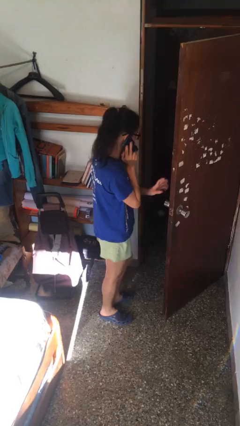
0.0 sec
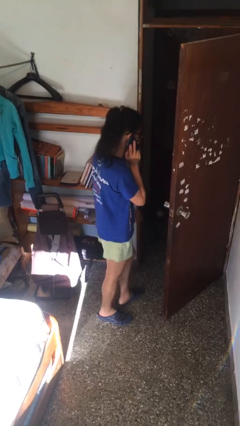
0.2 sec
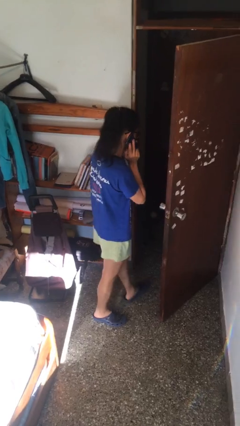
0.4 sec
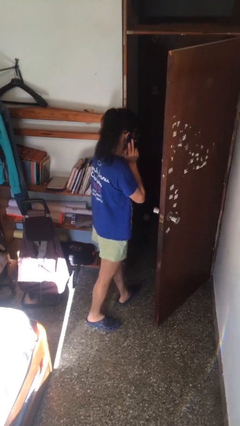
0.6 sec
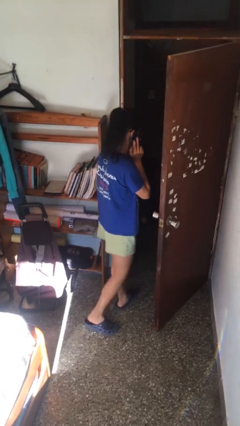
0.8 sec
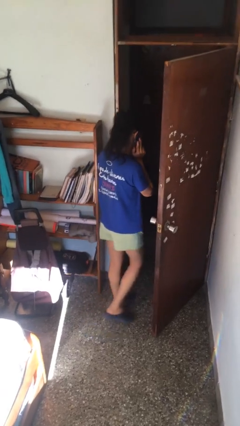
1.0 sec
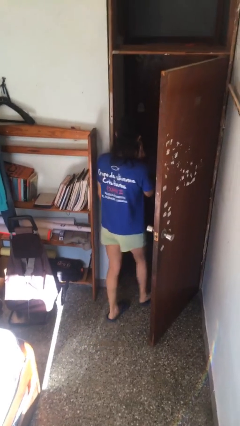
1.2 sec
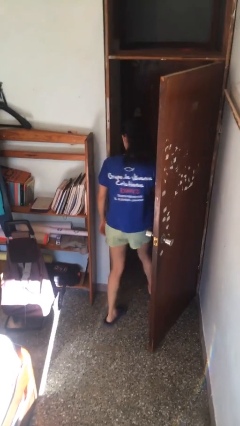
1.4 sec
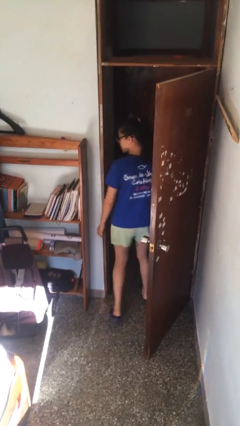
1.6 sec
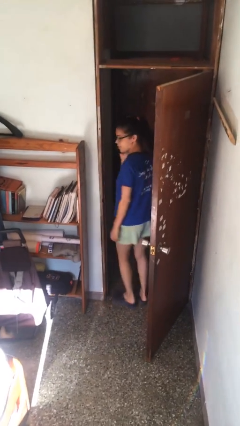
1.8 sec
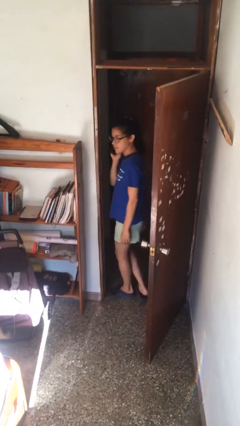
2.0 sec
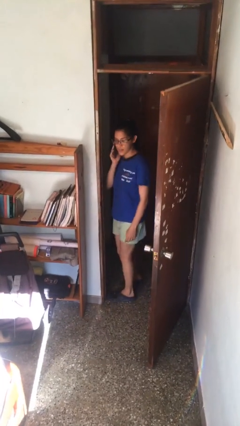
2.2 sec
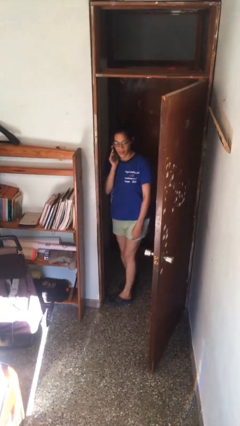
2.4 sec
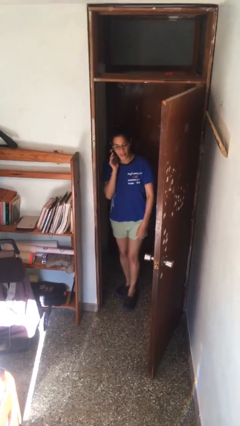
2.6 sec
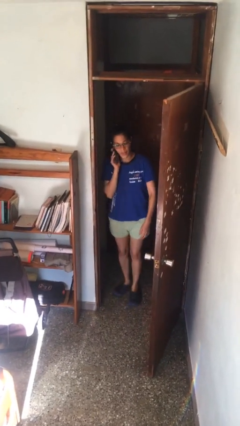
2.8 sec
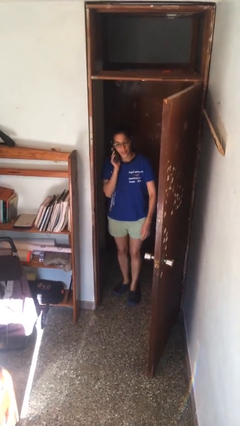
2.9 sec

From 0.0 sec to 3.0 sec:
person exits scene through structure

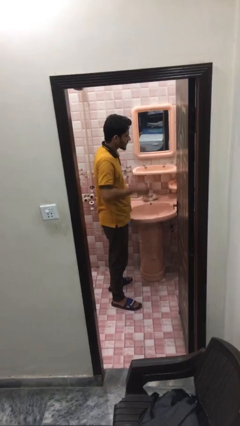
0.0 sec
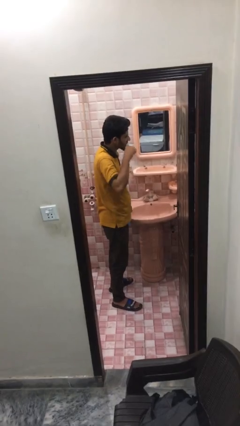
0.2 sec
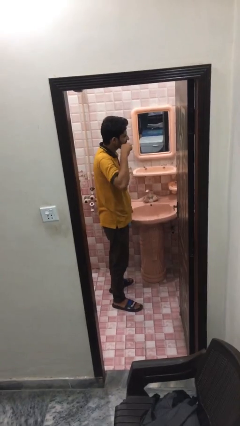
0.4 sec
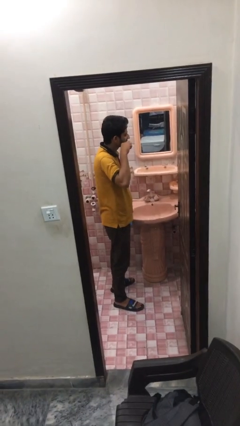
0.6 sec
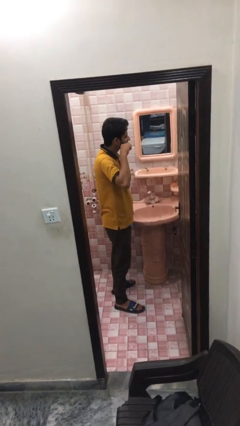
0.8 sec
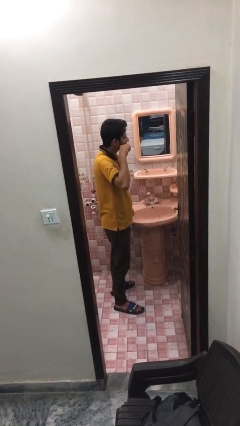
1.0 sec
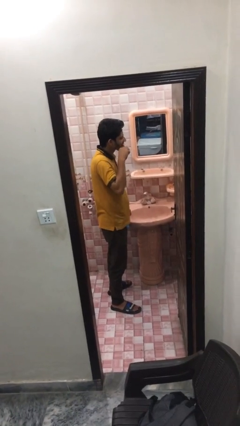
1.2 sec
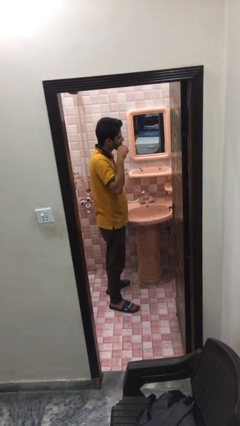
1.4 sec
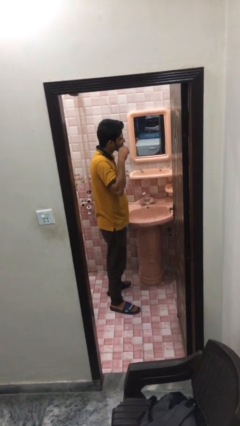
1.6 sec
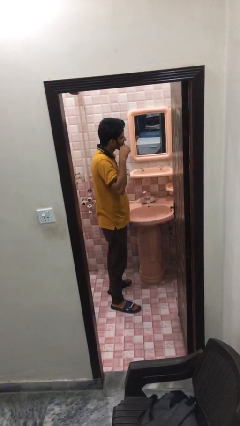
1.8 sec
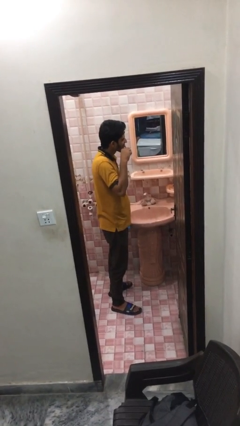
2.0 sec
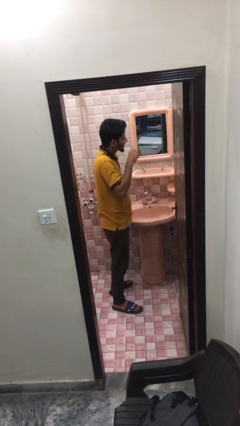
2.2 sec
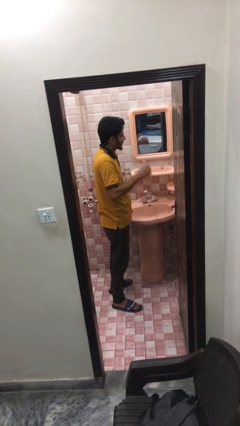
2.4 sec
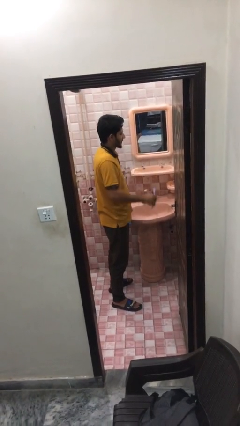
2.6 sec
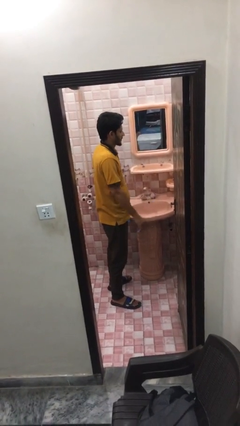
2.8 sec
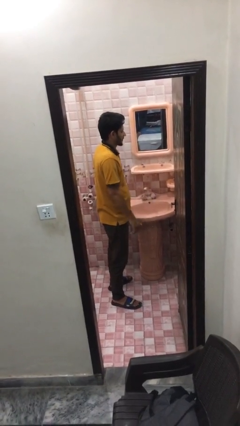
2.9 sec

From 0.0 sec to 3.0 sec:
person brushes teeth

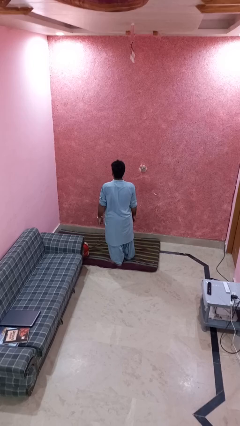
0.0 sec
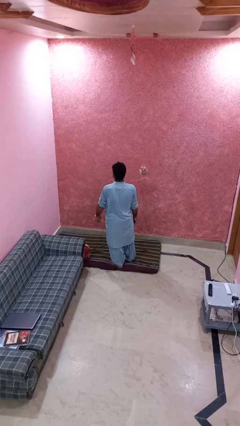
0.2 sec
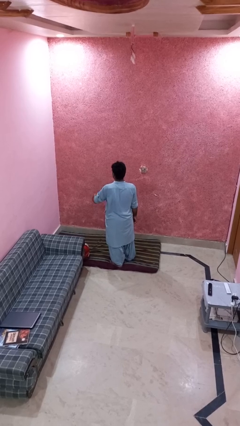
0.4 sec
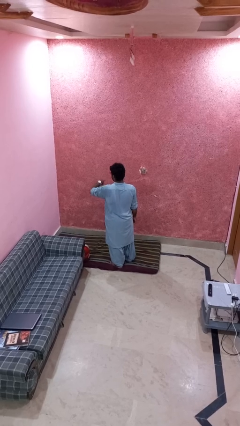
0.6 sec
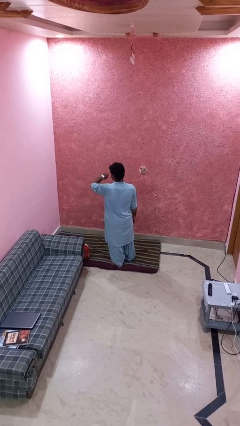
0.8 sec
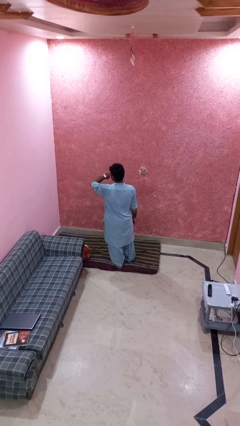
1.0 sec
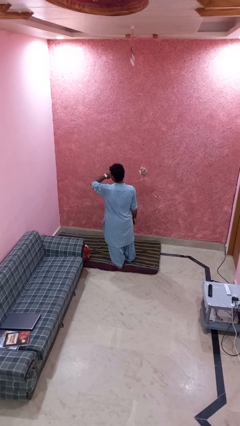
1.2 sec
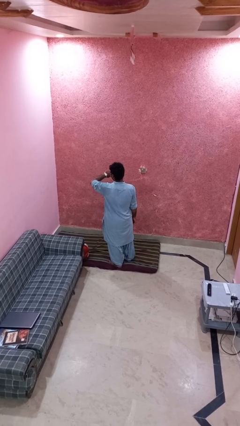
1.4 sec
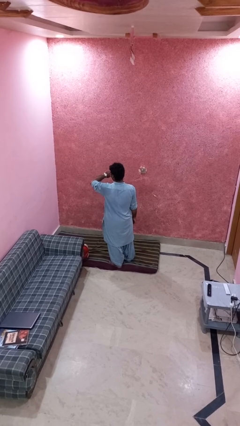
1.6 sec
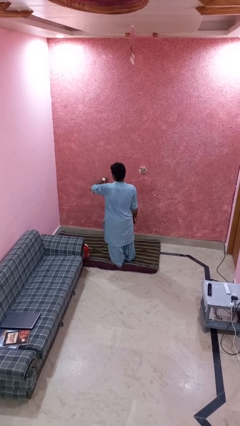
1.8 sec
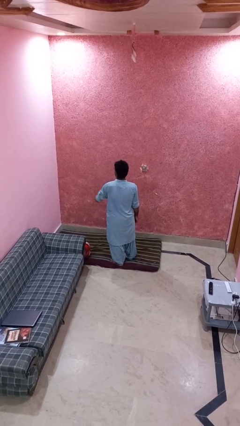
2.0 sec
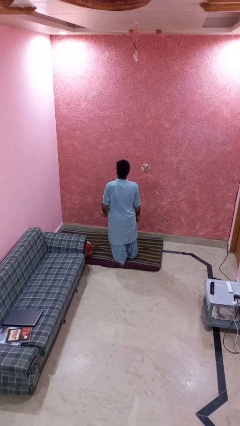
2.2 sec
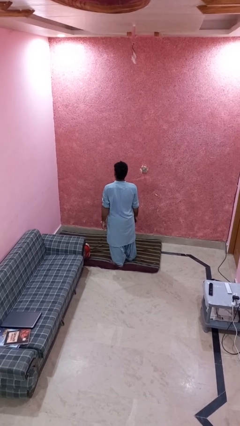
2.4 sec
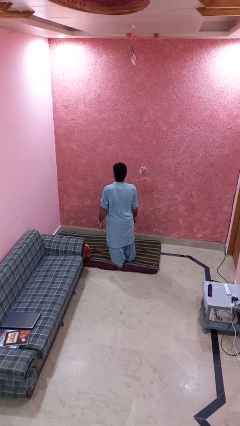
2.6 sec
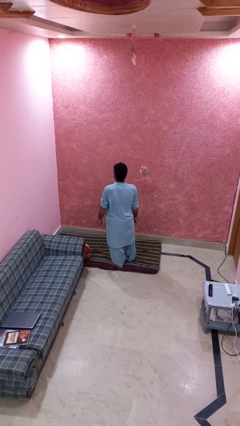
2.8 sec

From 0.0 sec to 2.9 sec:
person looks at wristwatch

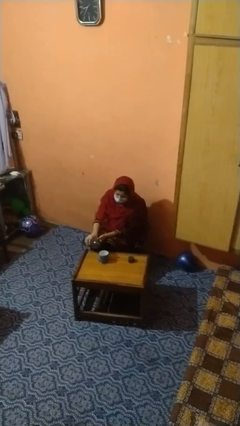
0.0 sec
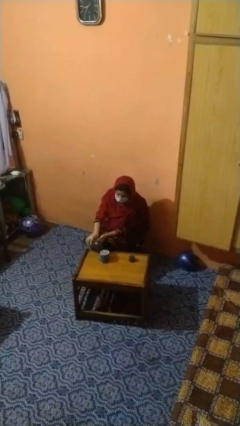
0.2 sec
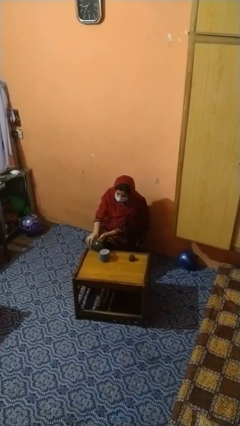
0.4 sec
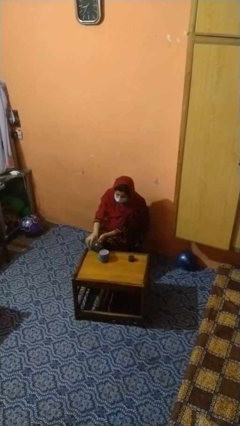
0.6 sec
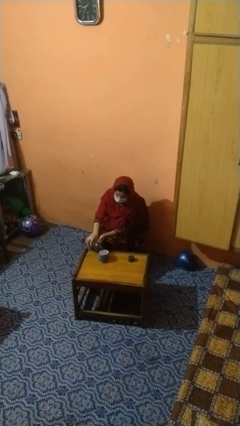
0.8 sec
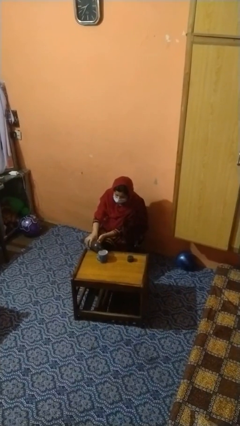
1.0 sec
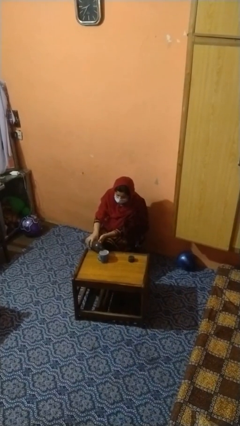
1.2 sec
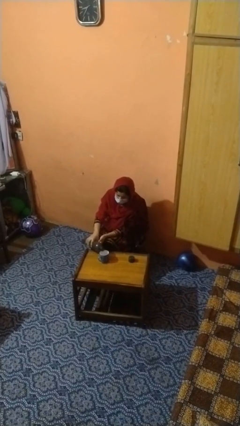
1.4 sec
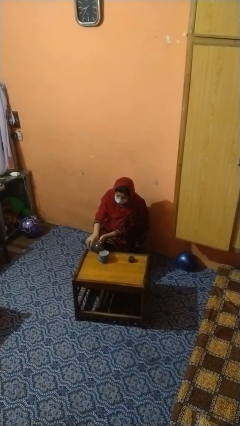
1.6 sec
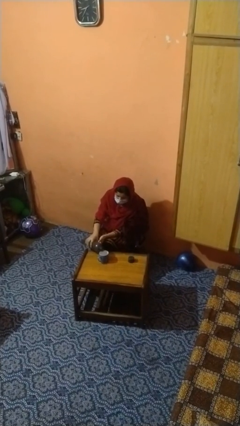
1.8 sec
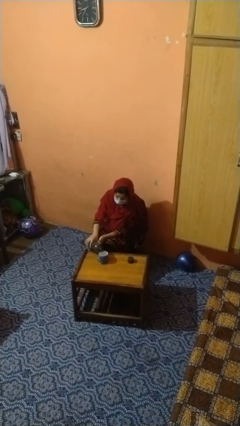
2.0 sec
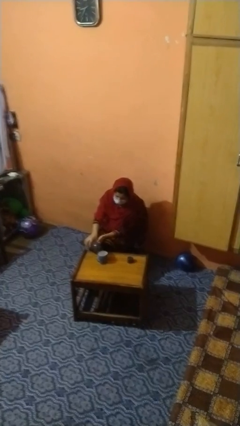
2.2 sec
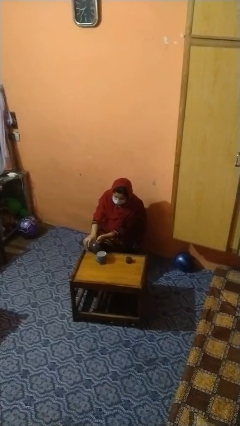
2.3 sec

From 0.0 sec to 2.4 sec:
person pours liquid into cup

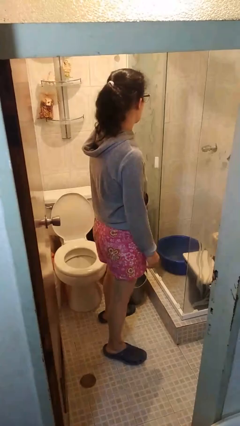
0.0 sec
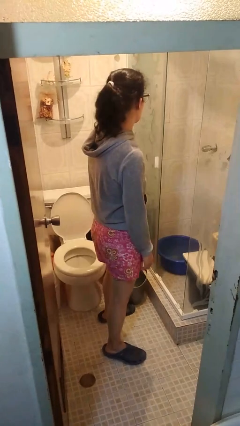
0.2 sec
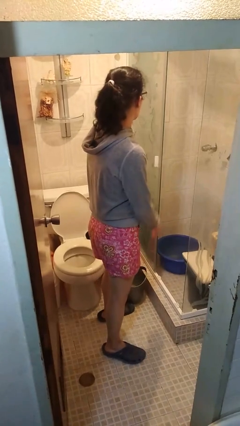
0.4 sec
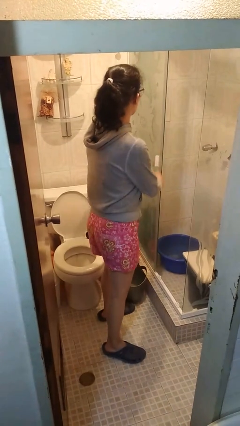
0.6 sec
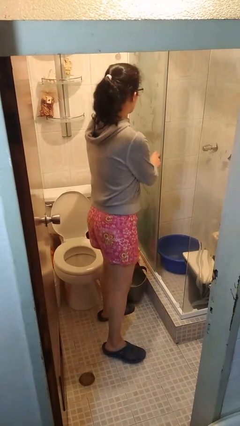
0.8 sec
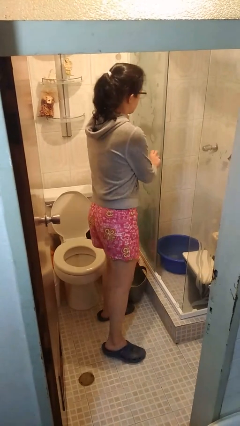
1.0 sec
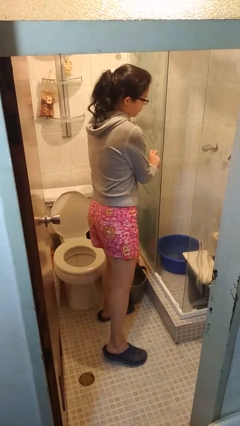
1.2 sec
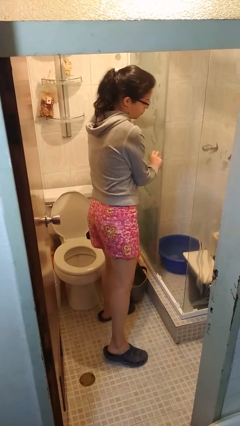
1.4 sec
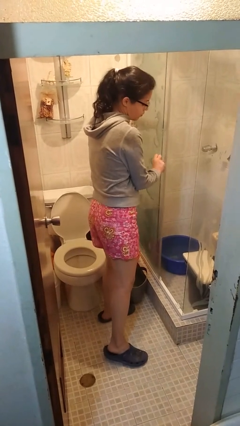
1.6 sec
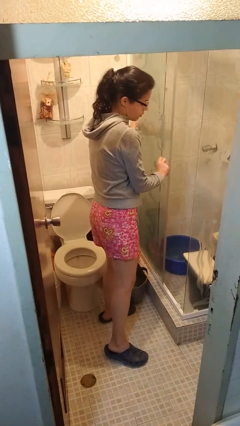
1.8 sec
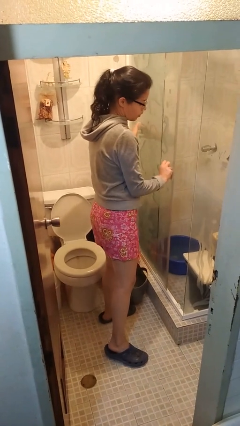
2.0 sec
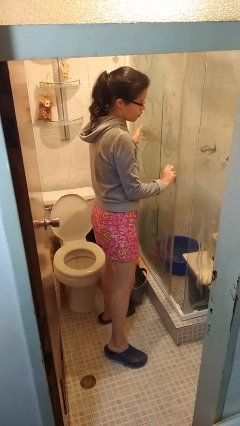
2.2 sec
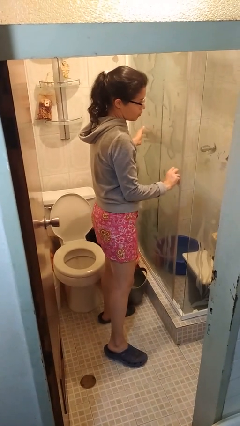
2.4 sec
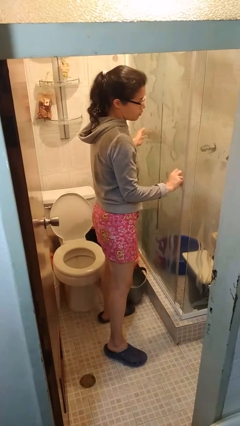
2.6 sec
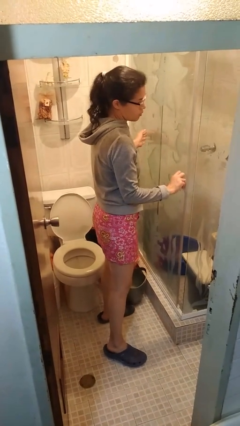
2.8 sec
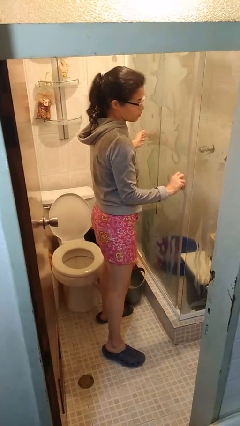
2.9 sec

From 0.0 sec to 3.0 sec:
person closes sliding door

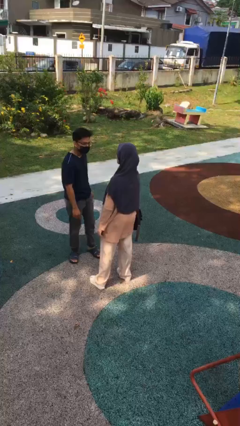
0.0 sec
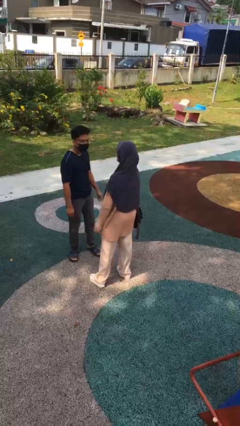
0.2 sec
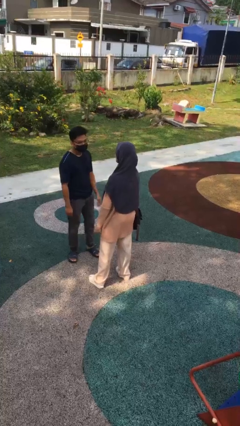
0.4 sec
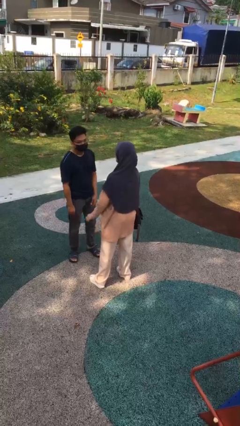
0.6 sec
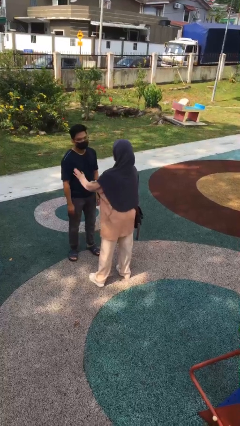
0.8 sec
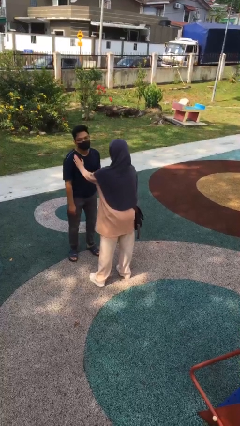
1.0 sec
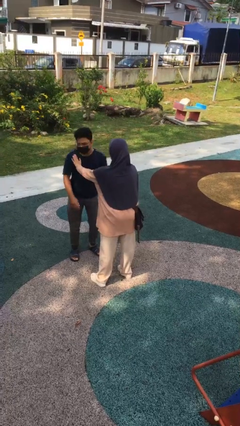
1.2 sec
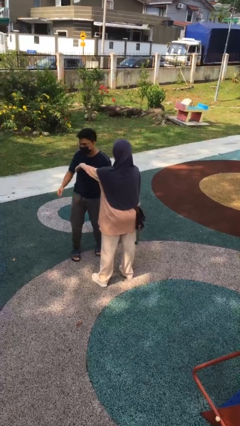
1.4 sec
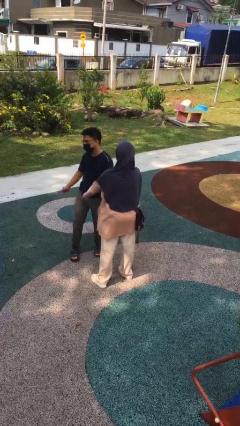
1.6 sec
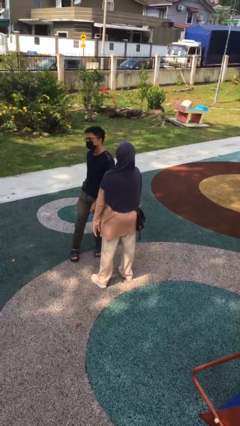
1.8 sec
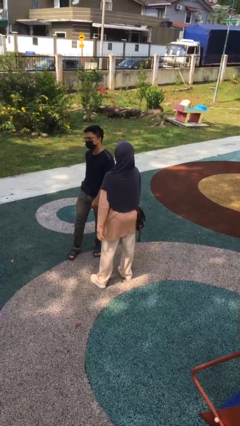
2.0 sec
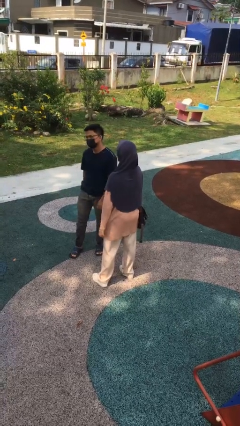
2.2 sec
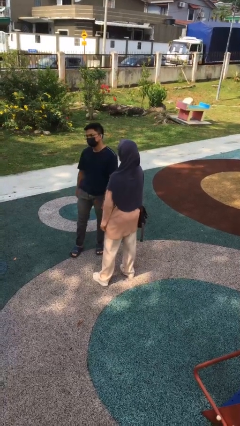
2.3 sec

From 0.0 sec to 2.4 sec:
person shoves person

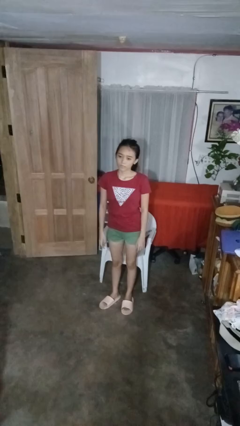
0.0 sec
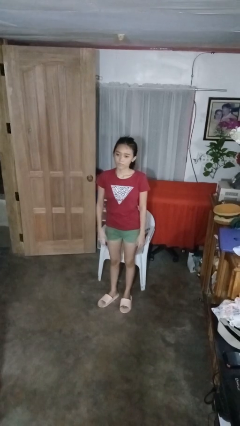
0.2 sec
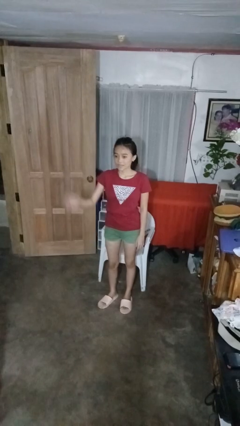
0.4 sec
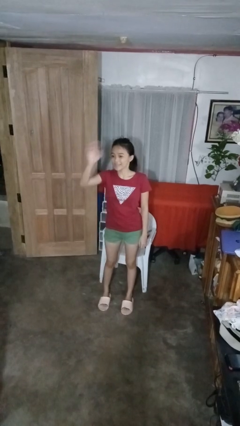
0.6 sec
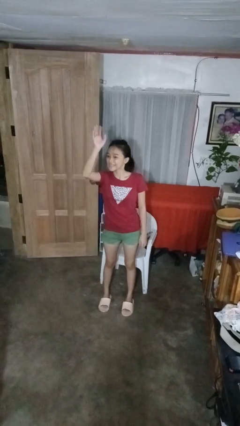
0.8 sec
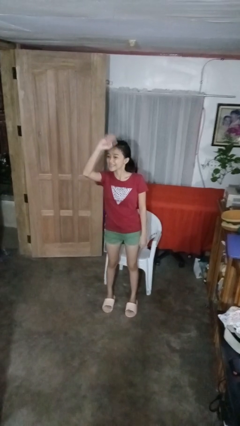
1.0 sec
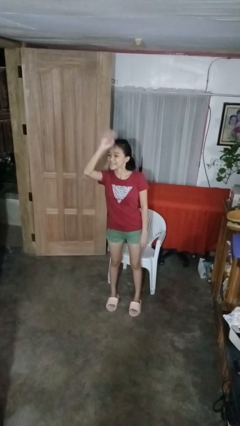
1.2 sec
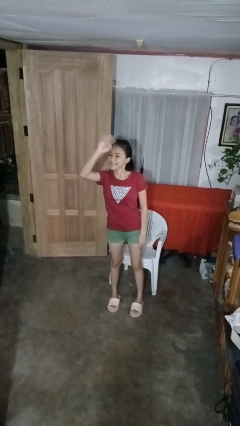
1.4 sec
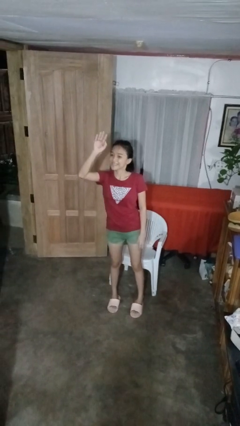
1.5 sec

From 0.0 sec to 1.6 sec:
person waves at person
